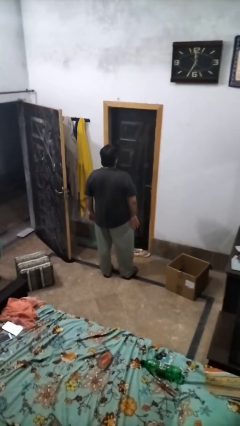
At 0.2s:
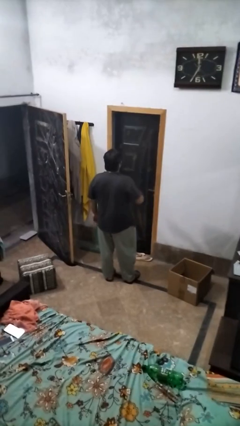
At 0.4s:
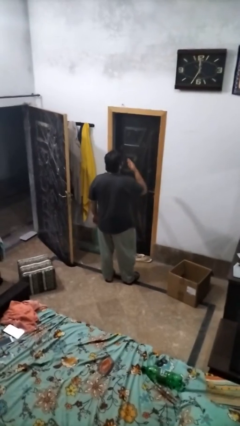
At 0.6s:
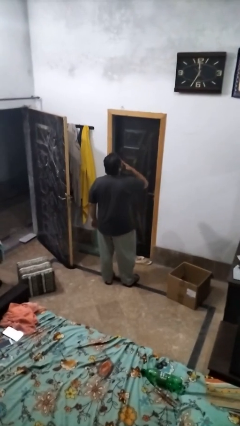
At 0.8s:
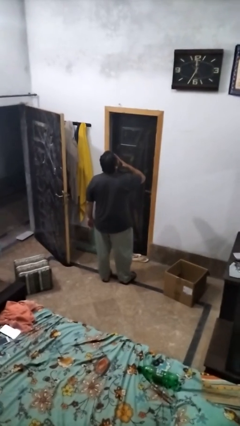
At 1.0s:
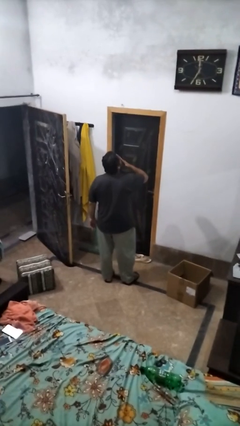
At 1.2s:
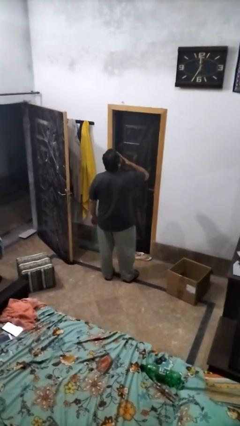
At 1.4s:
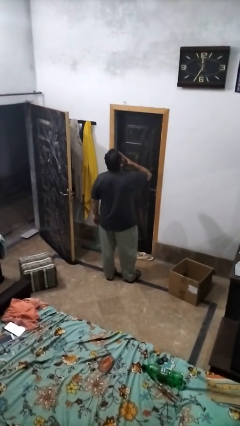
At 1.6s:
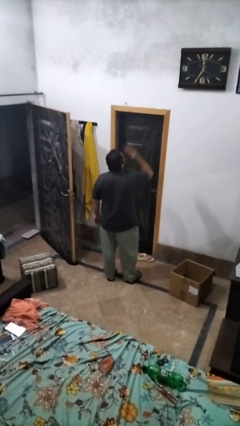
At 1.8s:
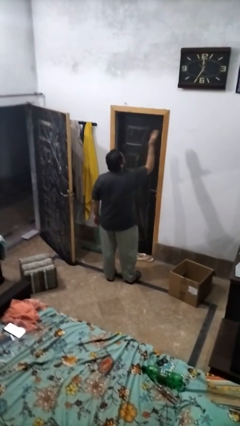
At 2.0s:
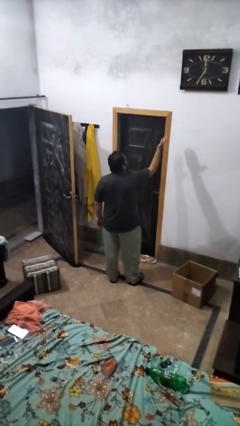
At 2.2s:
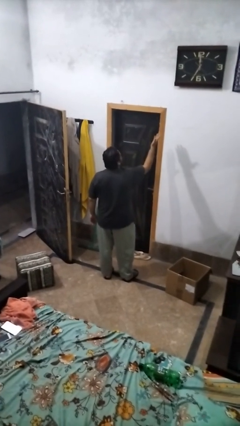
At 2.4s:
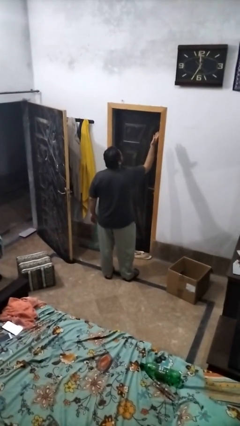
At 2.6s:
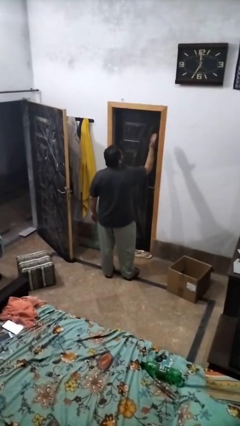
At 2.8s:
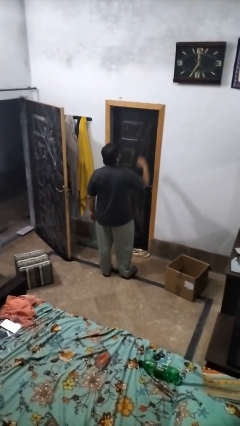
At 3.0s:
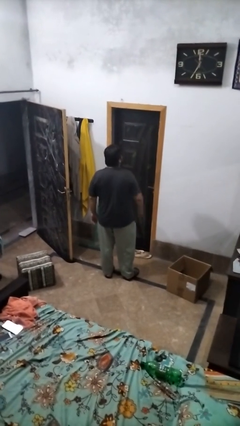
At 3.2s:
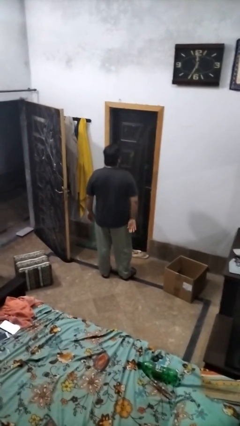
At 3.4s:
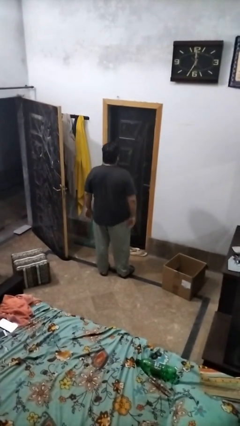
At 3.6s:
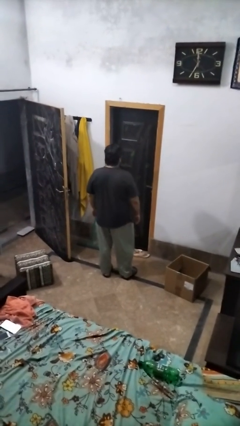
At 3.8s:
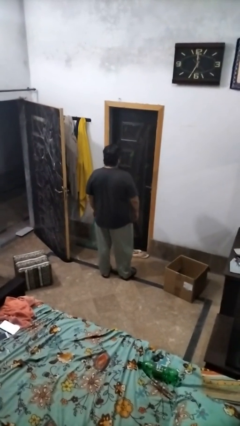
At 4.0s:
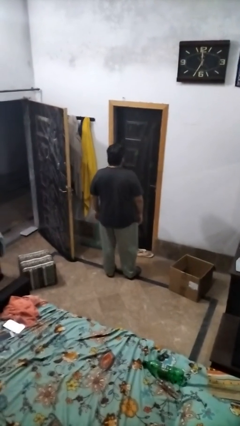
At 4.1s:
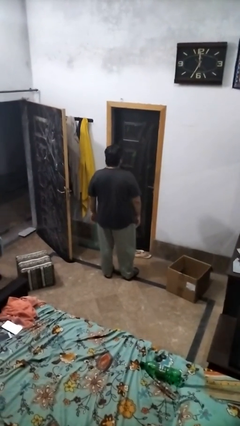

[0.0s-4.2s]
person gestures blow kiss

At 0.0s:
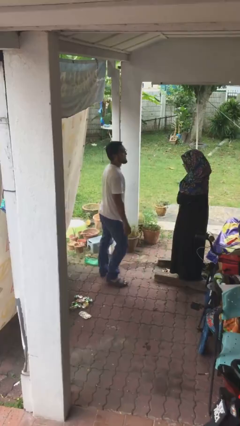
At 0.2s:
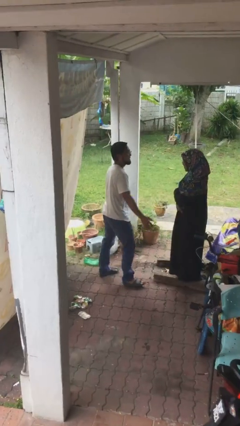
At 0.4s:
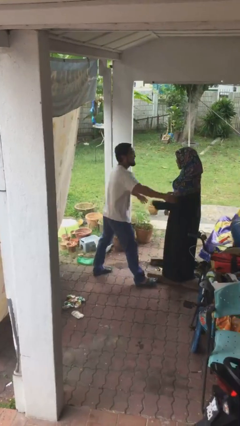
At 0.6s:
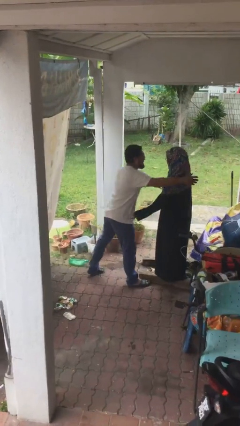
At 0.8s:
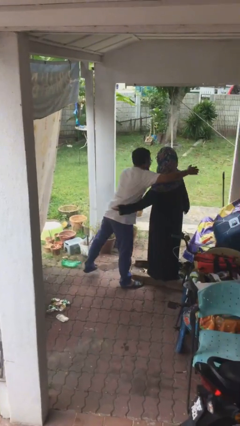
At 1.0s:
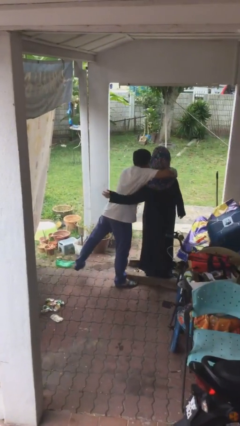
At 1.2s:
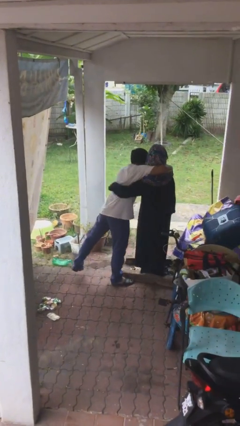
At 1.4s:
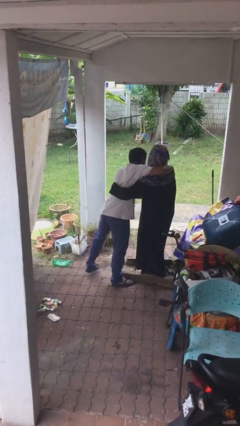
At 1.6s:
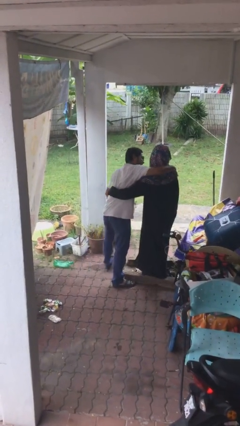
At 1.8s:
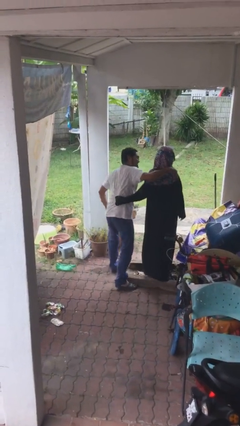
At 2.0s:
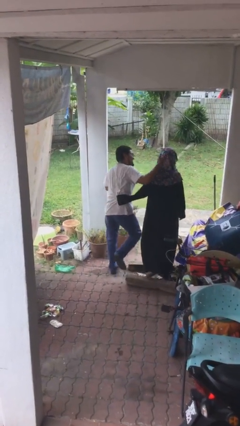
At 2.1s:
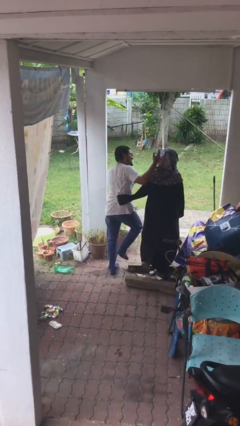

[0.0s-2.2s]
person embraces person

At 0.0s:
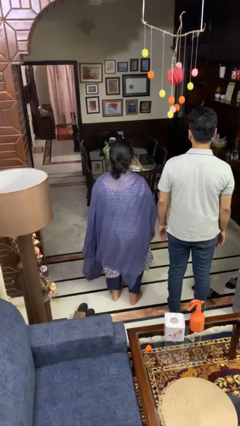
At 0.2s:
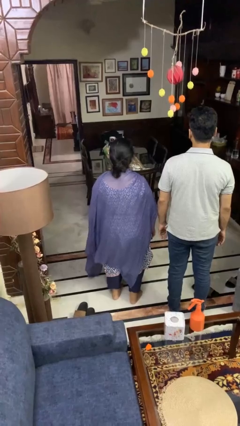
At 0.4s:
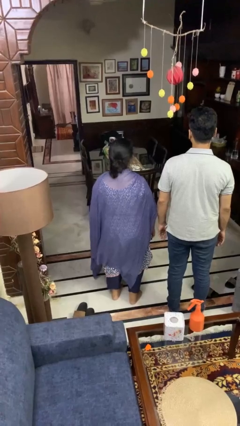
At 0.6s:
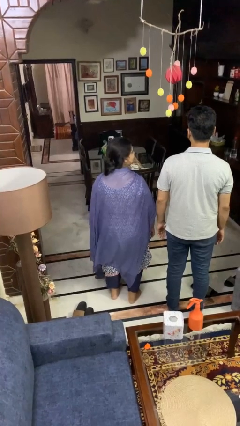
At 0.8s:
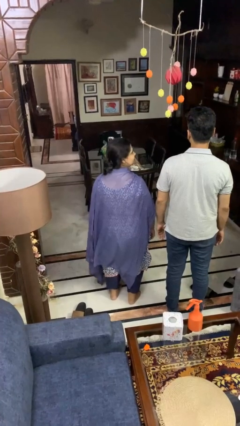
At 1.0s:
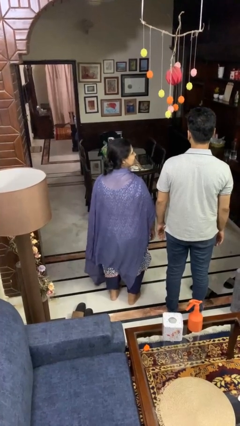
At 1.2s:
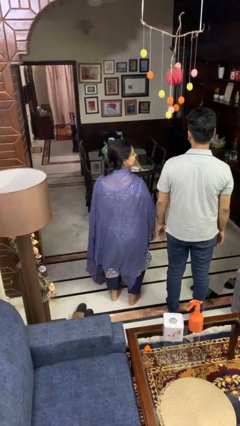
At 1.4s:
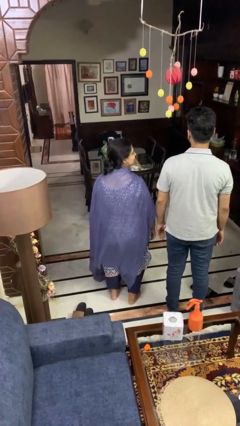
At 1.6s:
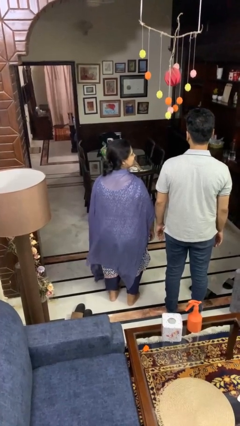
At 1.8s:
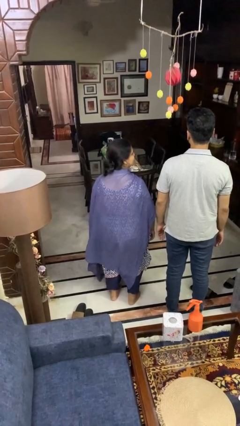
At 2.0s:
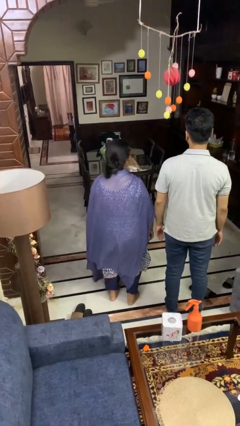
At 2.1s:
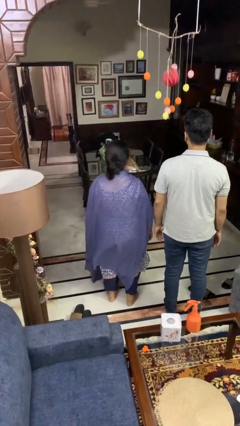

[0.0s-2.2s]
person looks over shoulder

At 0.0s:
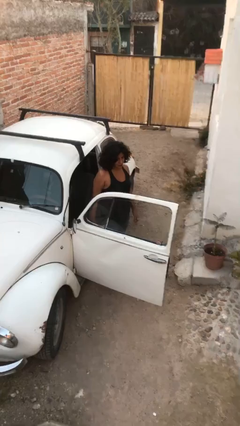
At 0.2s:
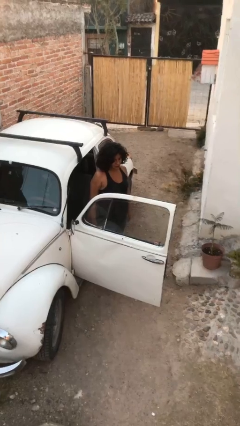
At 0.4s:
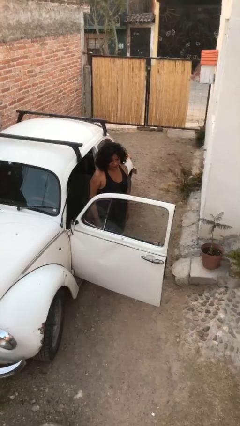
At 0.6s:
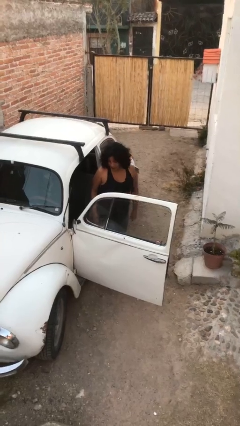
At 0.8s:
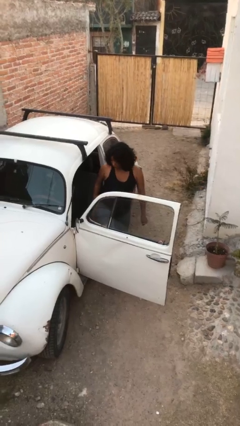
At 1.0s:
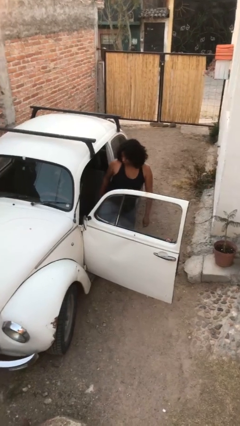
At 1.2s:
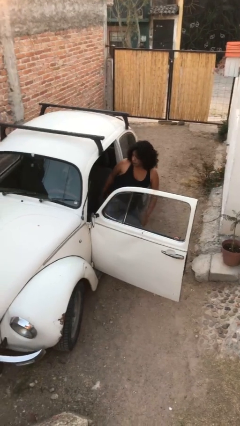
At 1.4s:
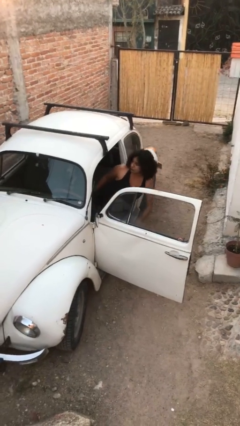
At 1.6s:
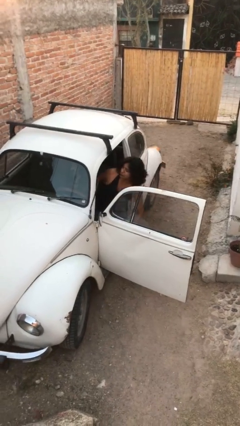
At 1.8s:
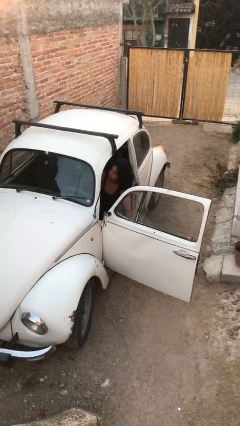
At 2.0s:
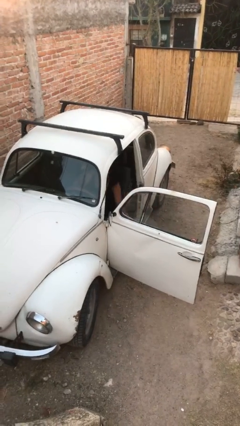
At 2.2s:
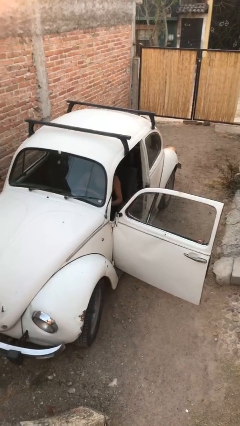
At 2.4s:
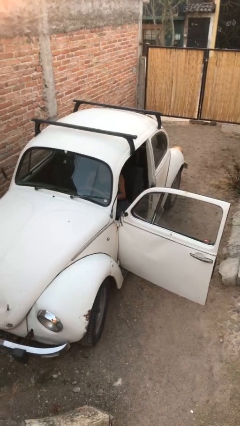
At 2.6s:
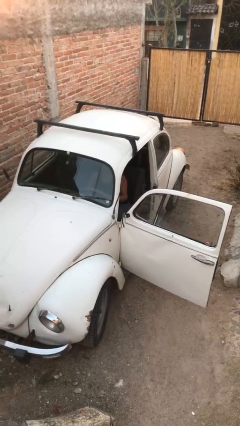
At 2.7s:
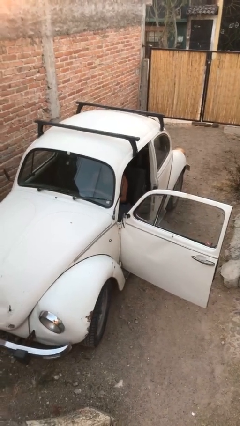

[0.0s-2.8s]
person enters car

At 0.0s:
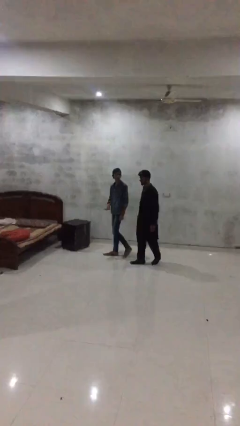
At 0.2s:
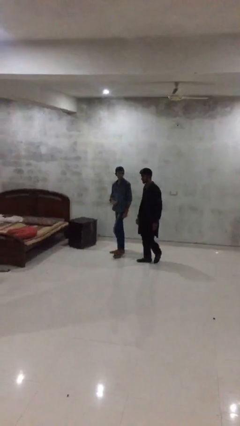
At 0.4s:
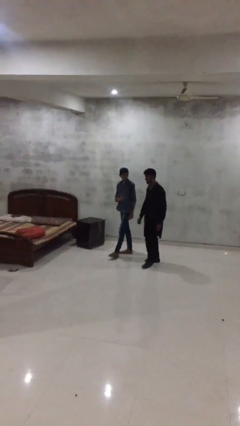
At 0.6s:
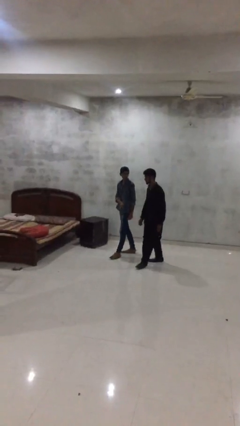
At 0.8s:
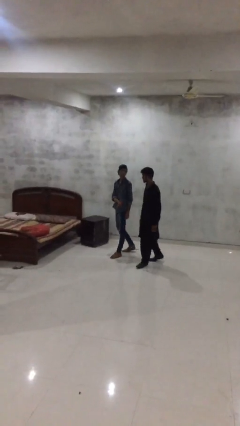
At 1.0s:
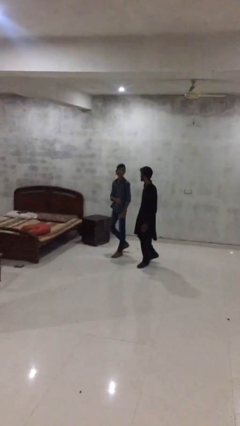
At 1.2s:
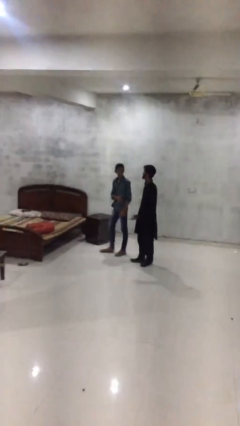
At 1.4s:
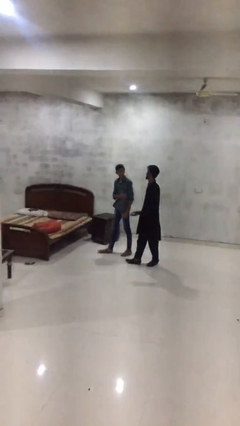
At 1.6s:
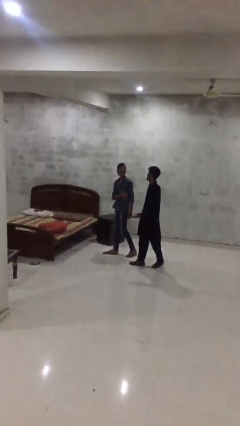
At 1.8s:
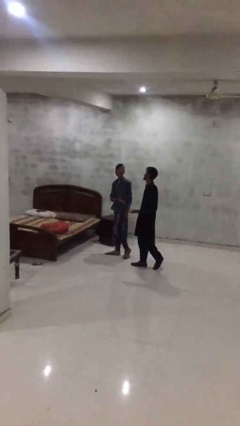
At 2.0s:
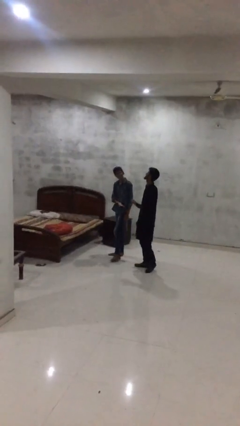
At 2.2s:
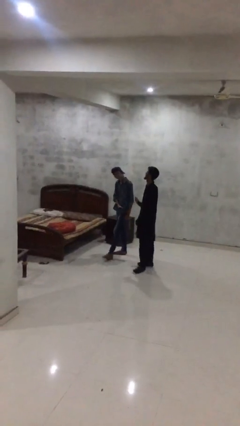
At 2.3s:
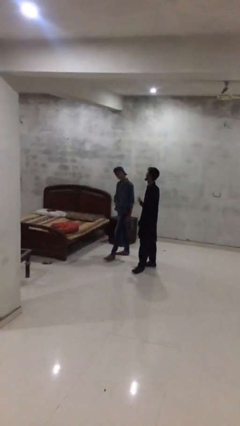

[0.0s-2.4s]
person talks to person

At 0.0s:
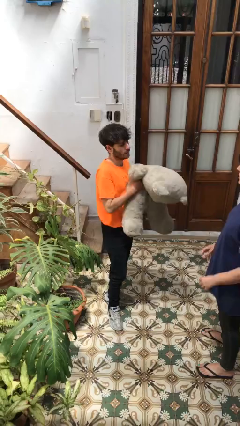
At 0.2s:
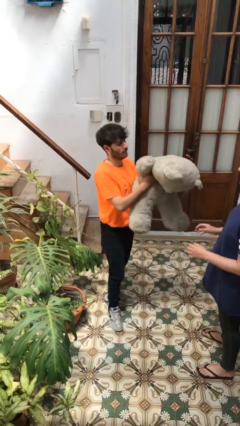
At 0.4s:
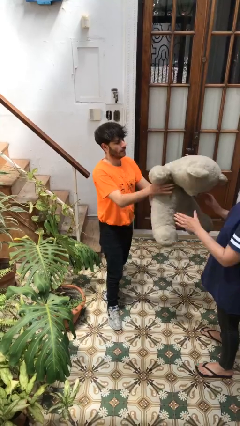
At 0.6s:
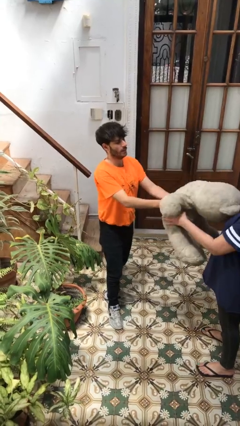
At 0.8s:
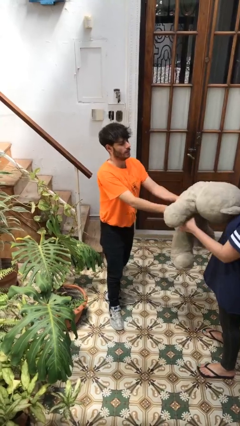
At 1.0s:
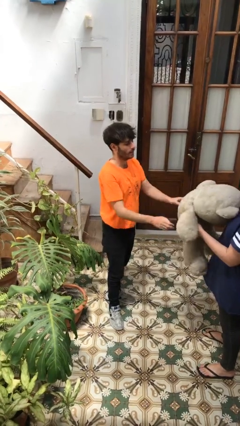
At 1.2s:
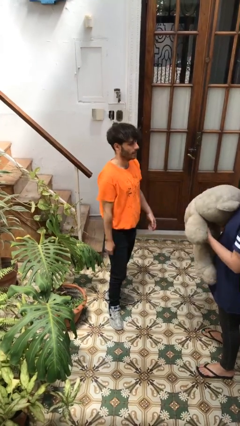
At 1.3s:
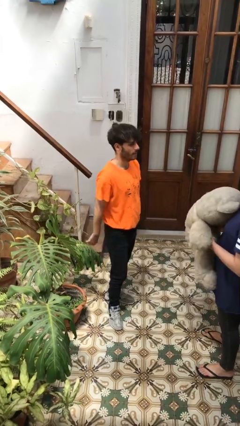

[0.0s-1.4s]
person transfers object to person

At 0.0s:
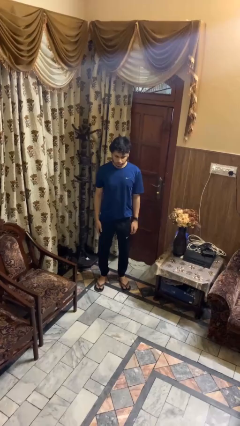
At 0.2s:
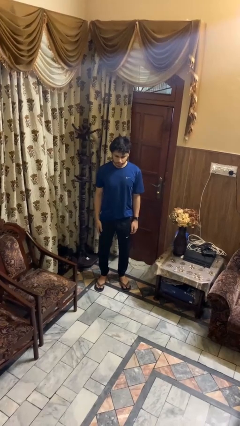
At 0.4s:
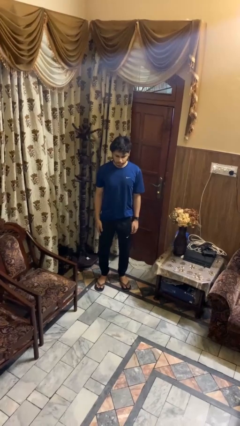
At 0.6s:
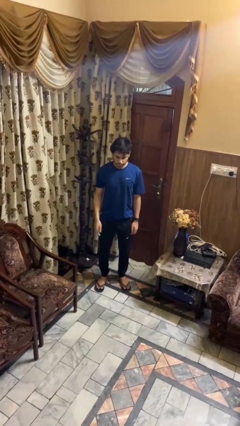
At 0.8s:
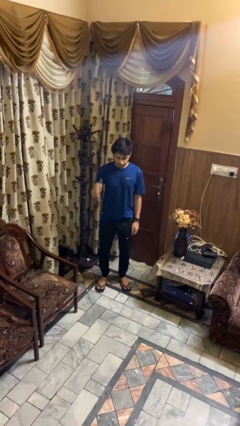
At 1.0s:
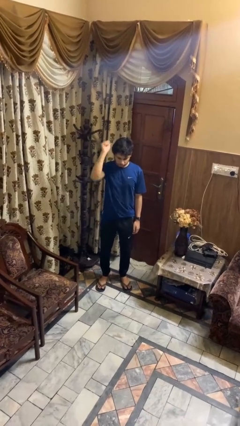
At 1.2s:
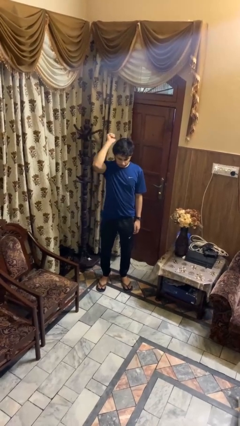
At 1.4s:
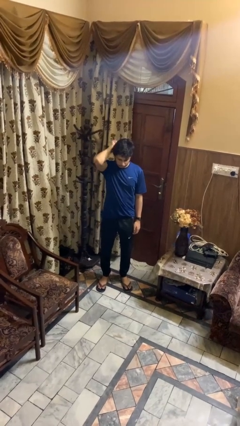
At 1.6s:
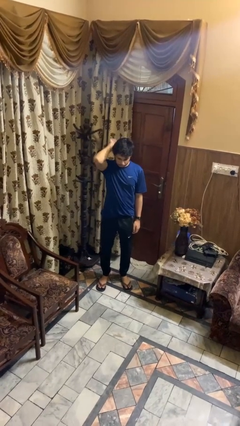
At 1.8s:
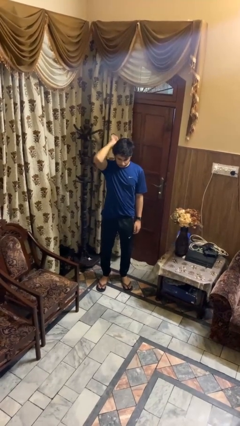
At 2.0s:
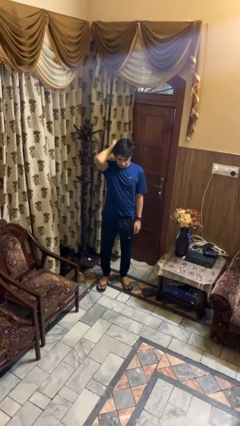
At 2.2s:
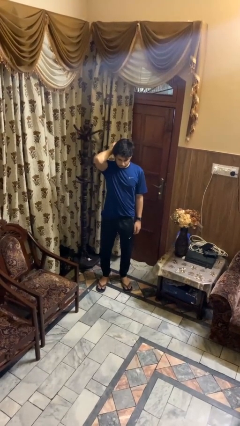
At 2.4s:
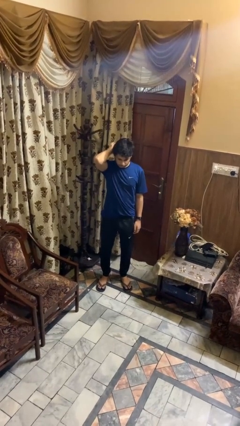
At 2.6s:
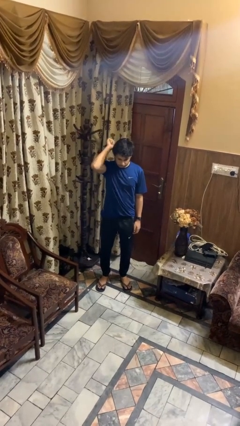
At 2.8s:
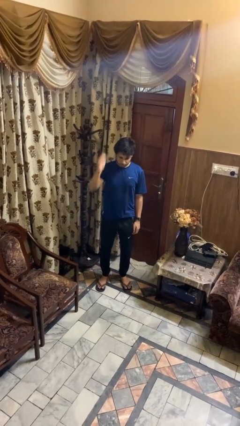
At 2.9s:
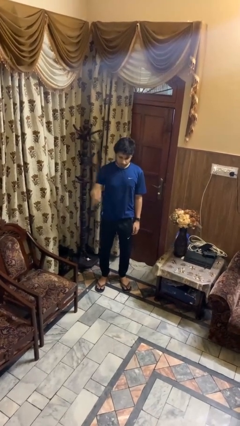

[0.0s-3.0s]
person gestures behind me
